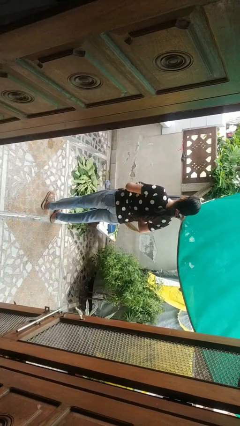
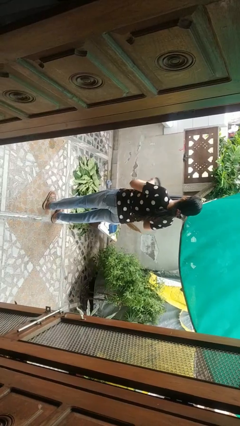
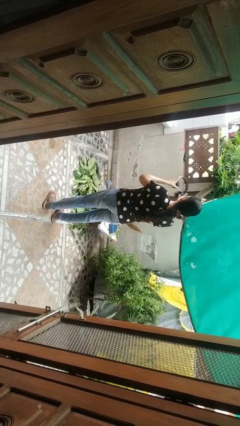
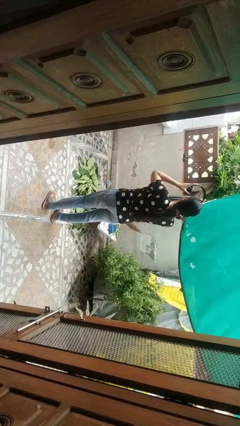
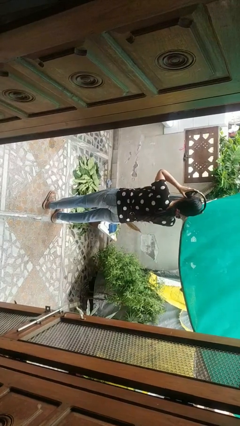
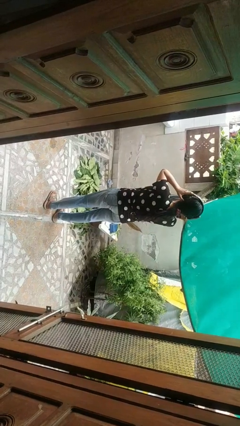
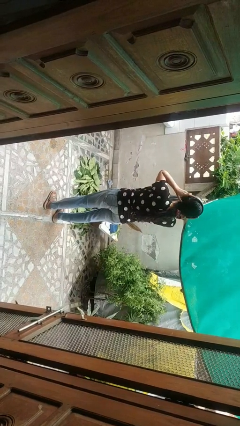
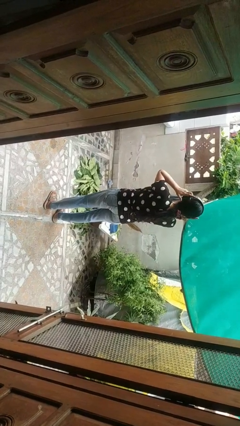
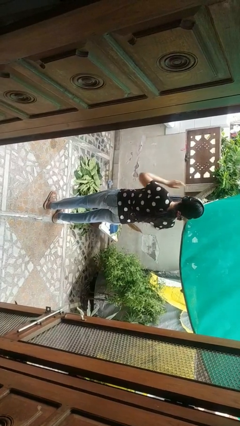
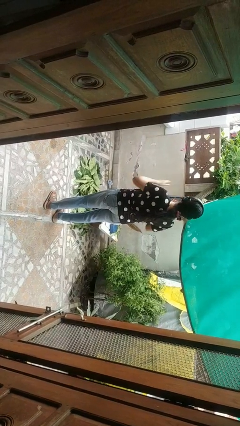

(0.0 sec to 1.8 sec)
person puts on headphones

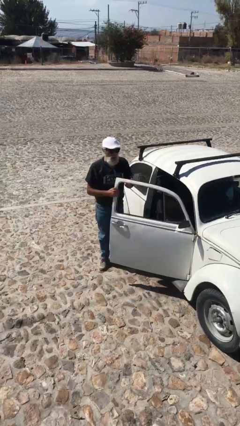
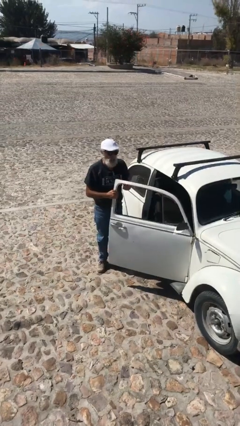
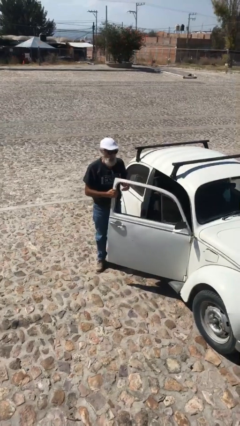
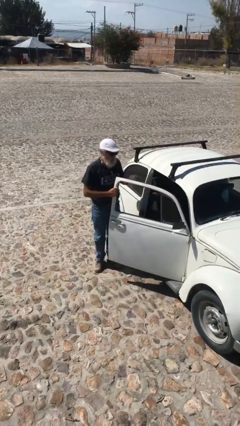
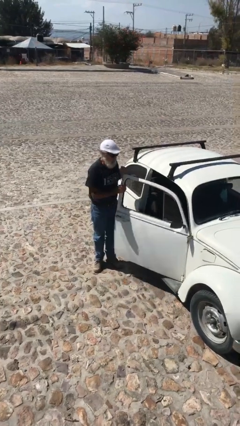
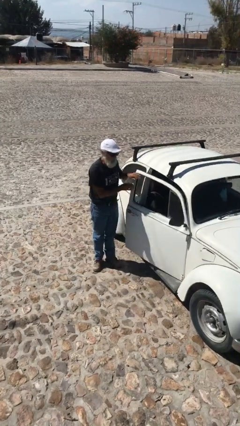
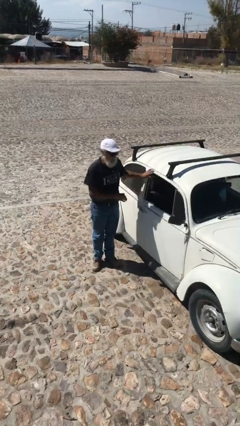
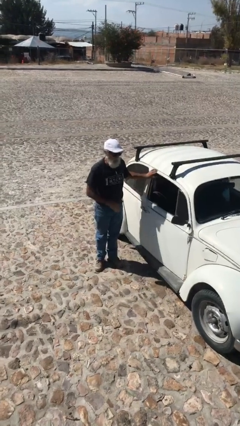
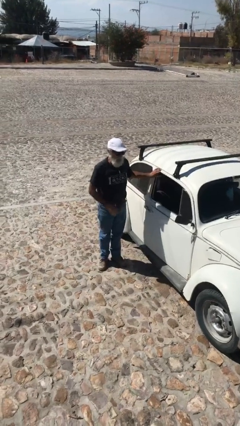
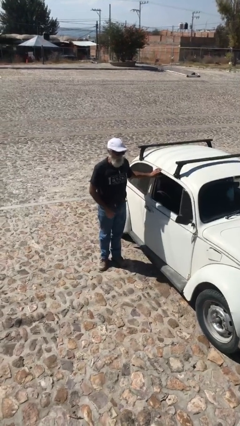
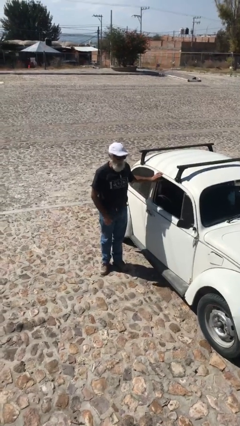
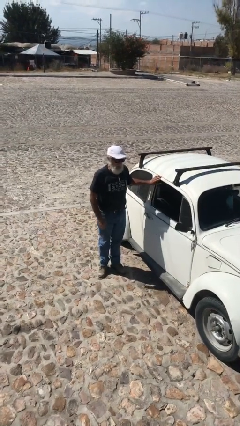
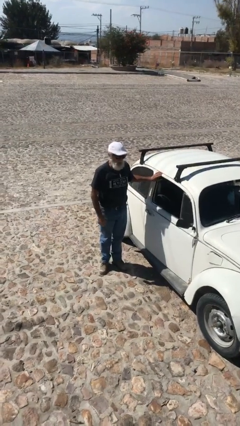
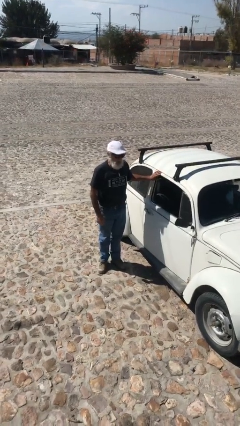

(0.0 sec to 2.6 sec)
person closes car door

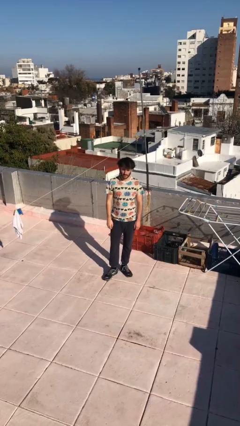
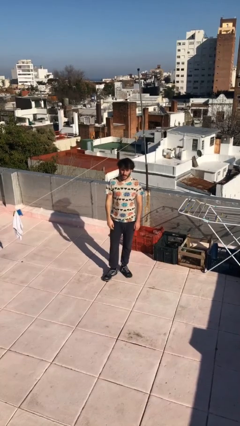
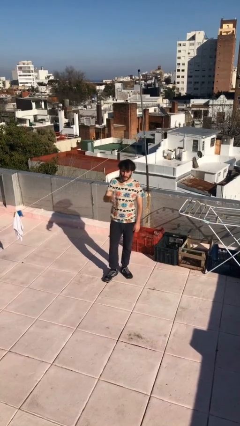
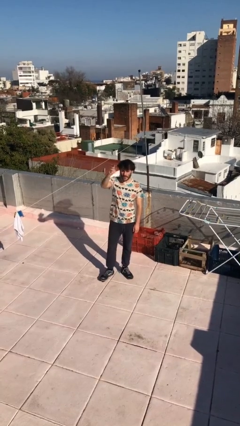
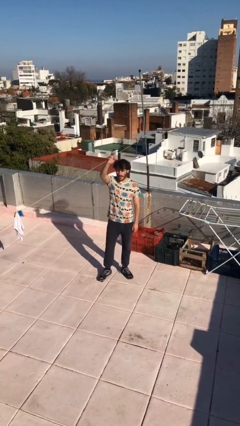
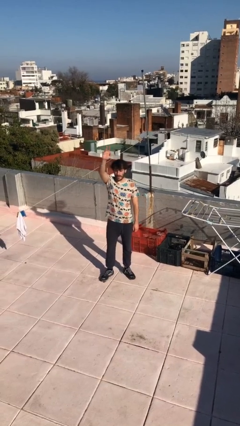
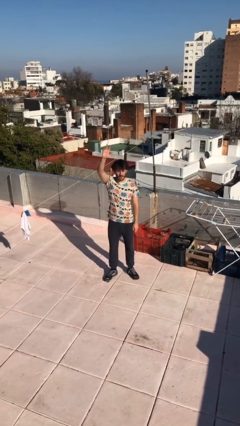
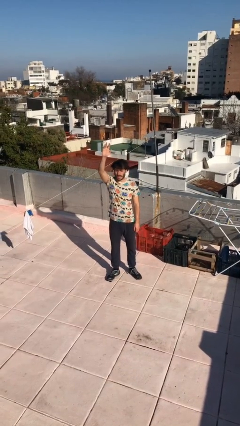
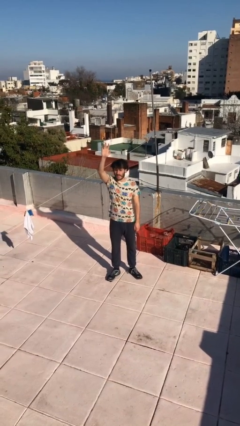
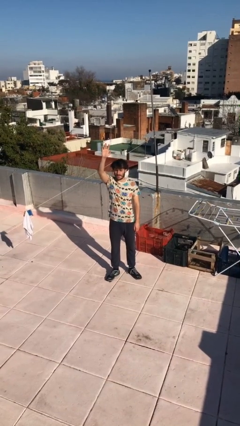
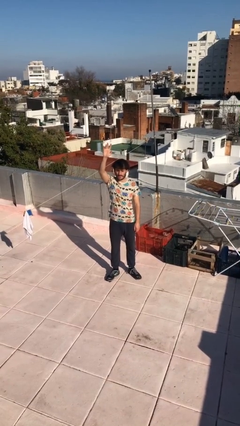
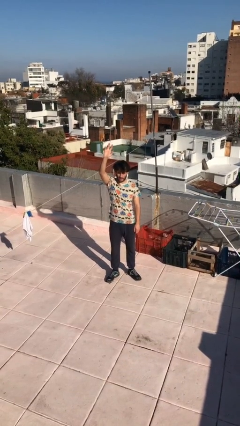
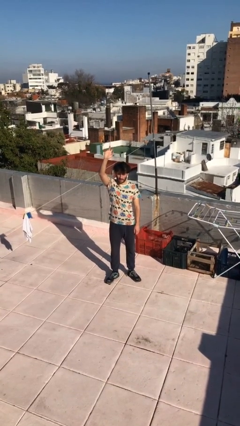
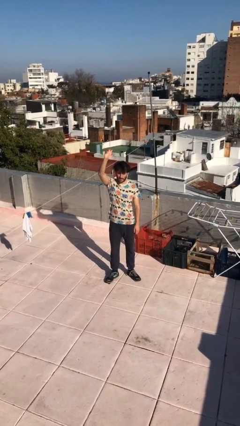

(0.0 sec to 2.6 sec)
person gestures raise hand

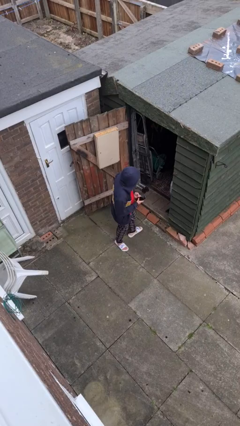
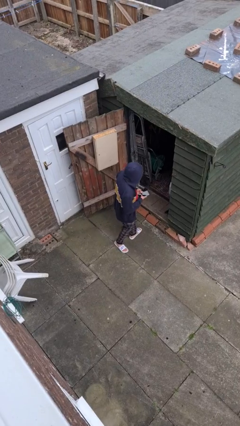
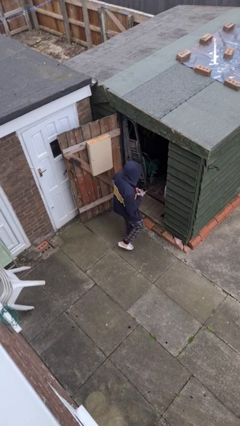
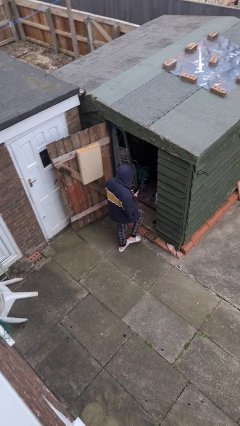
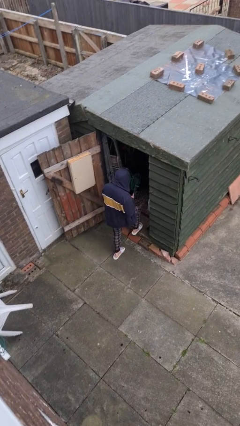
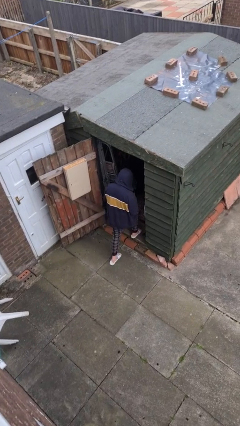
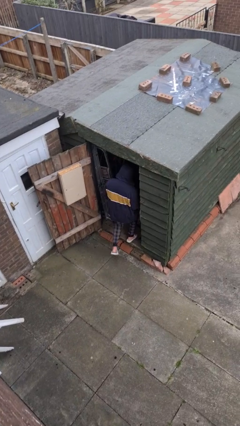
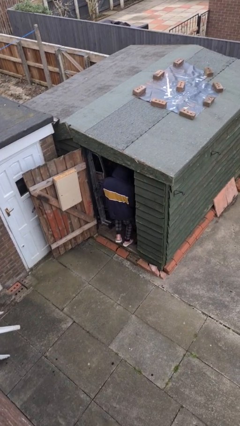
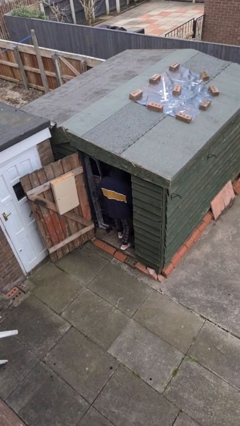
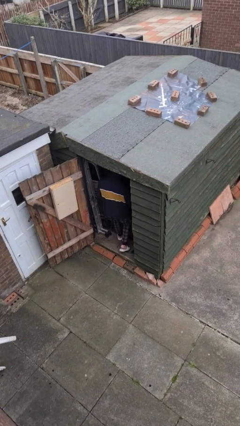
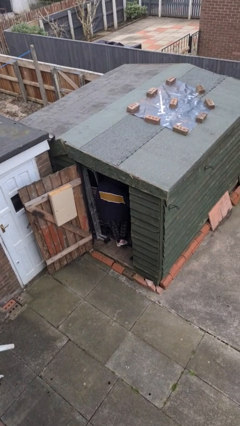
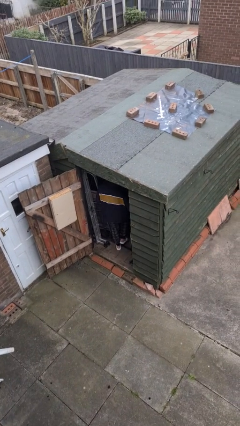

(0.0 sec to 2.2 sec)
person exits scene through structure

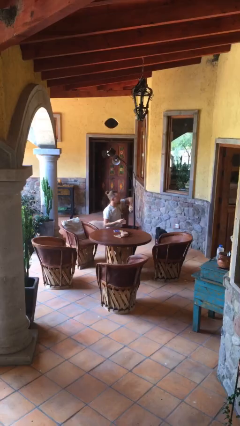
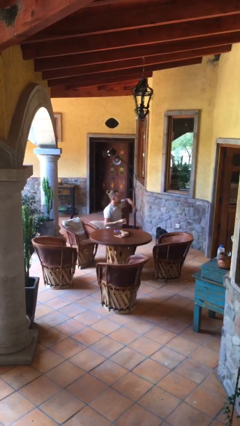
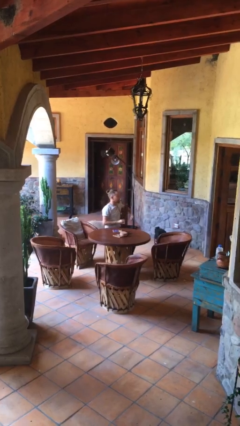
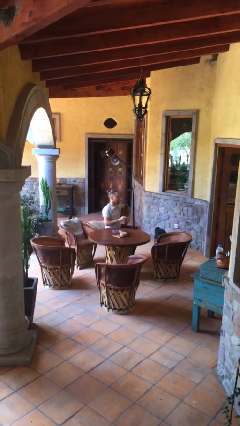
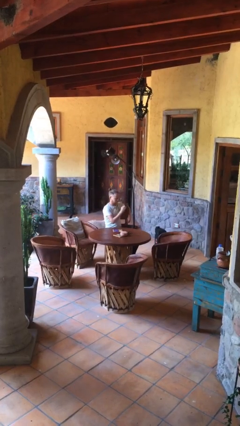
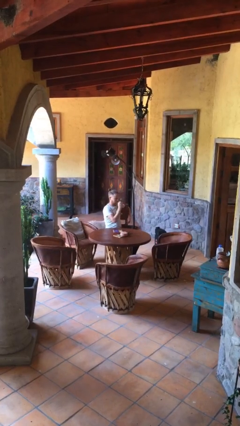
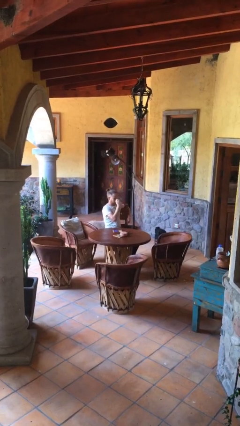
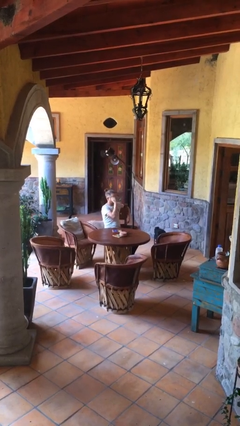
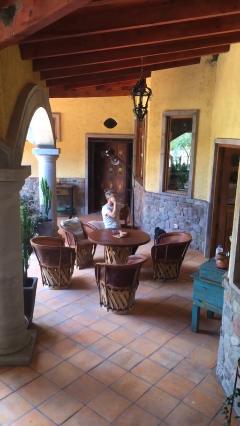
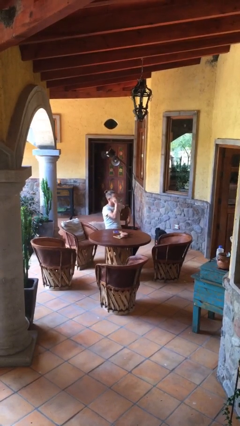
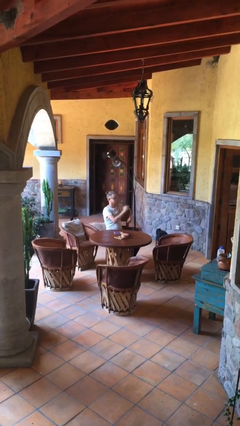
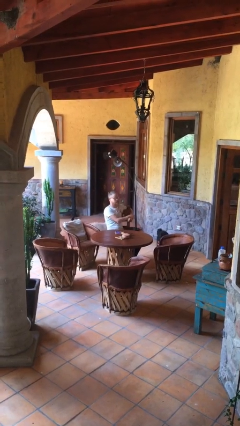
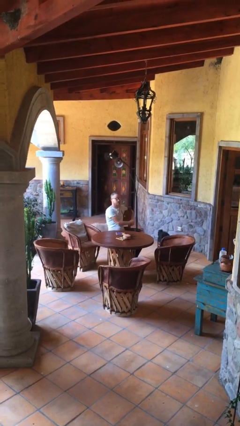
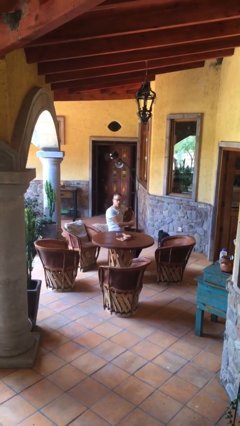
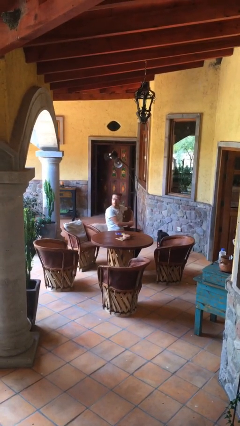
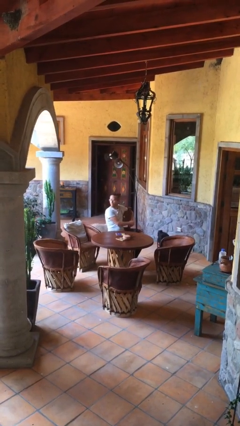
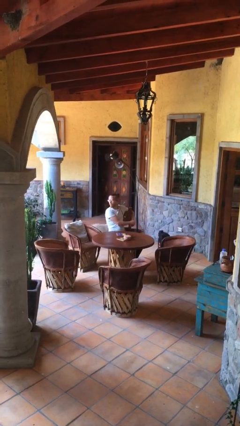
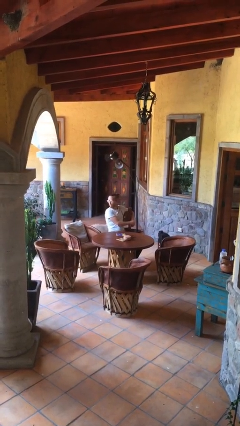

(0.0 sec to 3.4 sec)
person puts on glasses

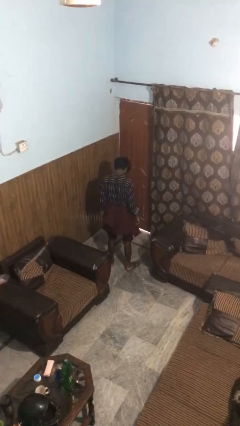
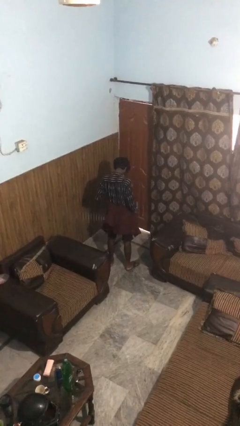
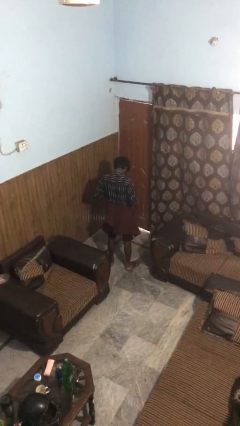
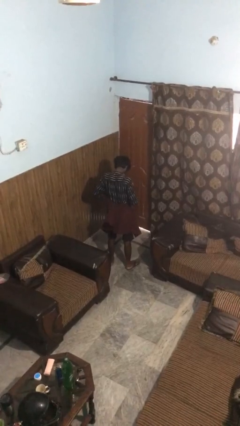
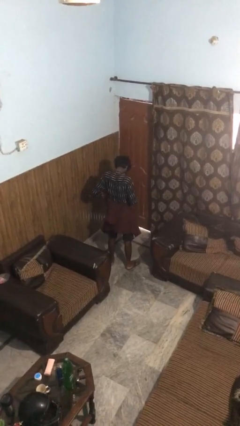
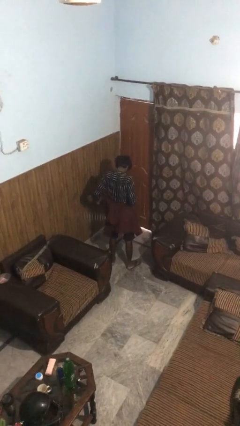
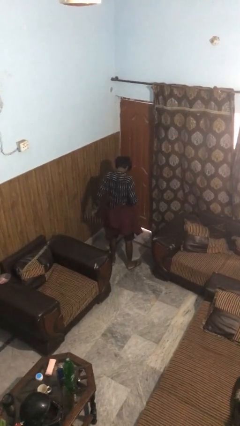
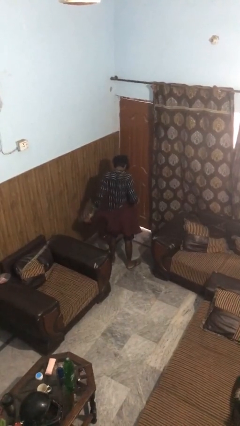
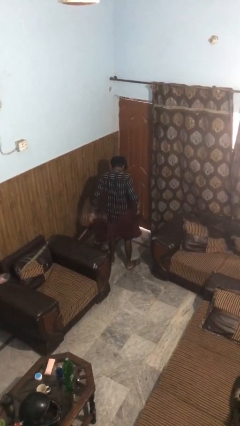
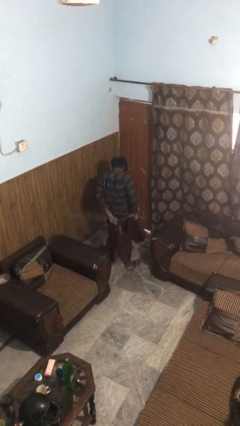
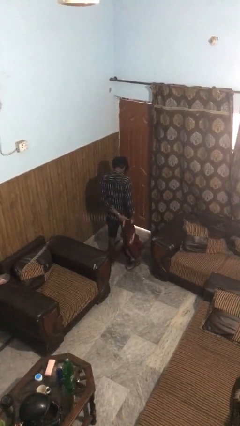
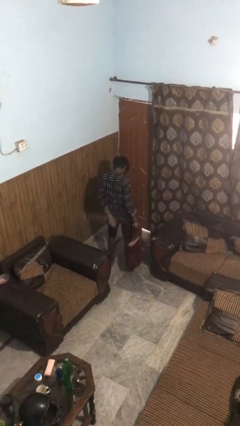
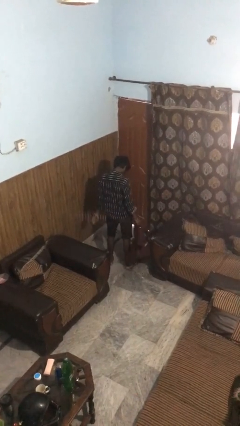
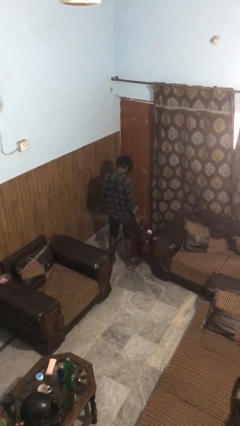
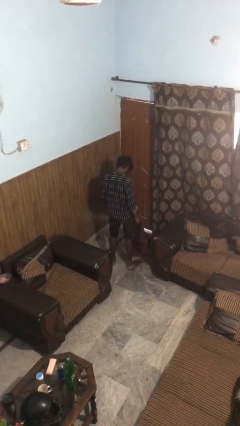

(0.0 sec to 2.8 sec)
person unties jacket around waist

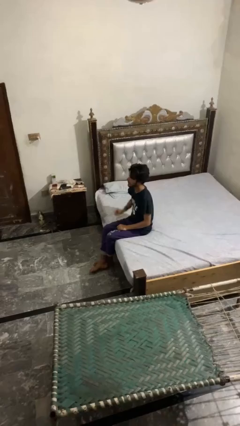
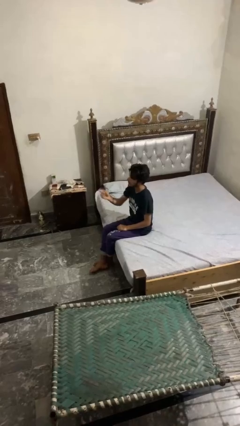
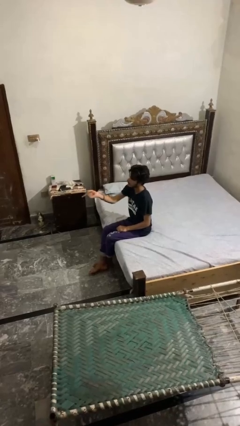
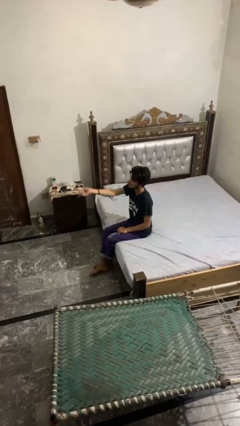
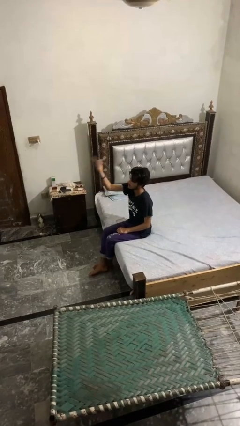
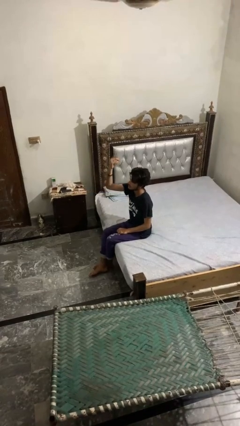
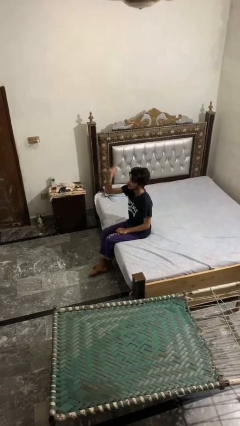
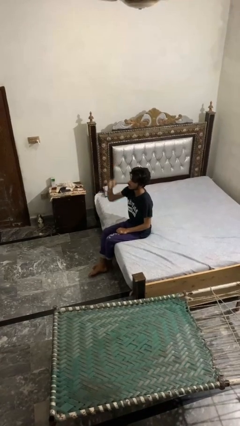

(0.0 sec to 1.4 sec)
person gestures swipe up
